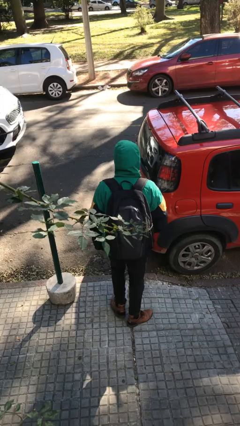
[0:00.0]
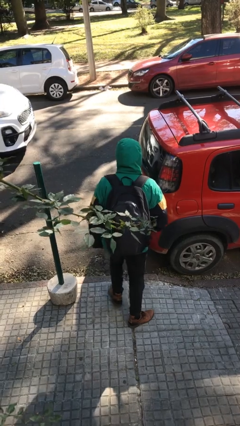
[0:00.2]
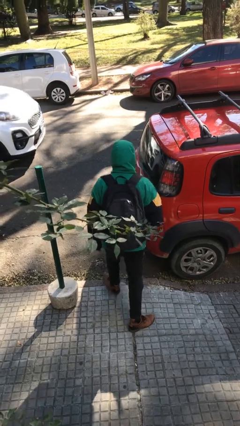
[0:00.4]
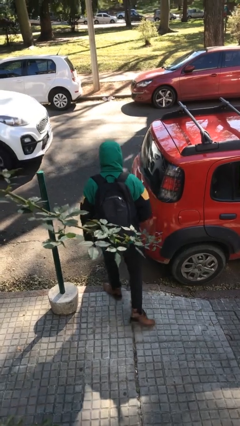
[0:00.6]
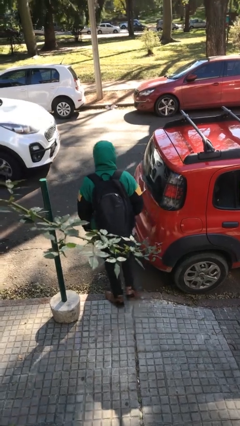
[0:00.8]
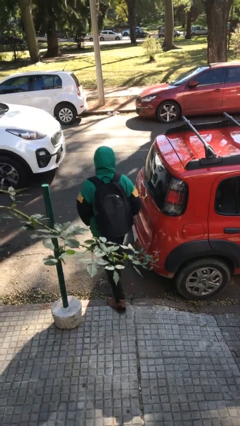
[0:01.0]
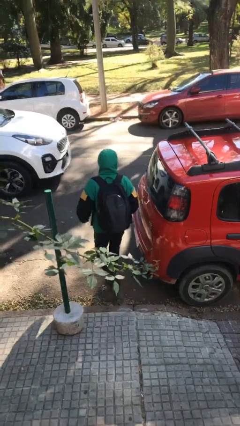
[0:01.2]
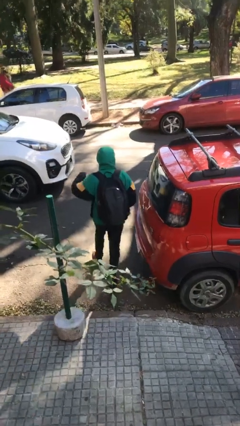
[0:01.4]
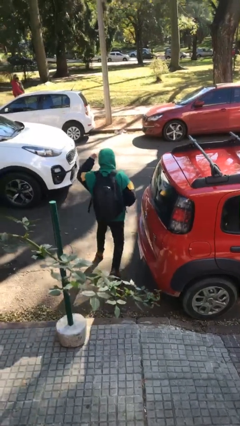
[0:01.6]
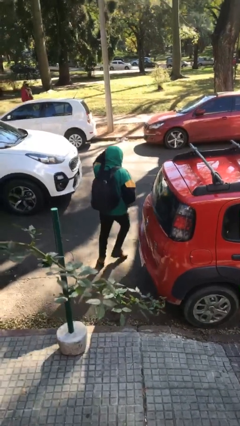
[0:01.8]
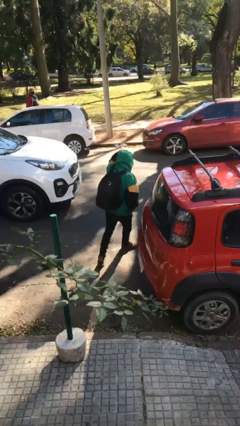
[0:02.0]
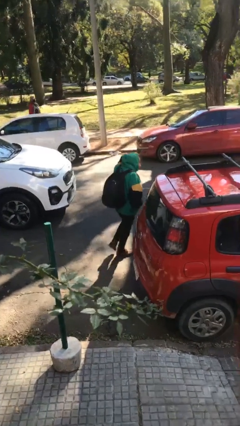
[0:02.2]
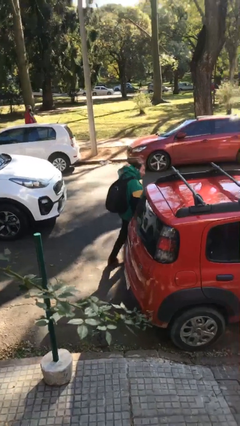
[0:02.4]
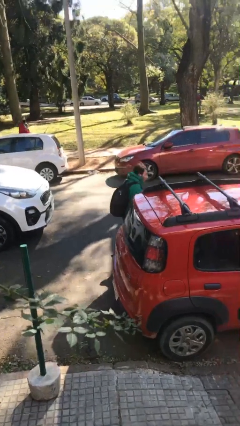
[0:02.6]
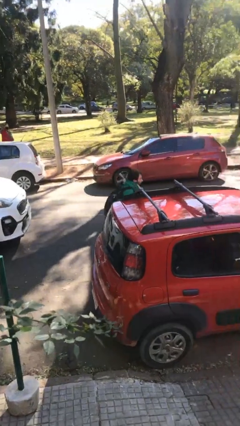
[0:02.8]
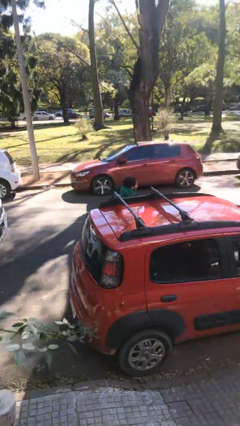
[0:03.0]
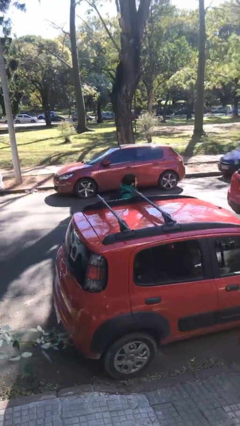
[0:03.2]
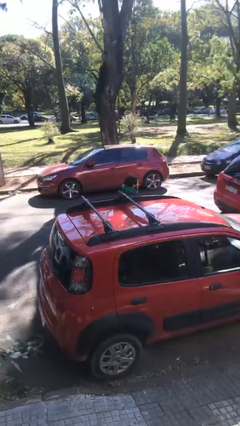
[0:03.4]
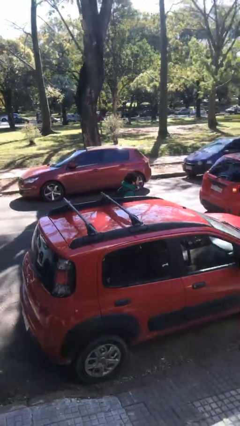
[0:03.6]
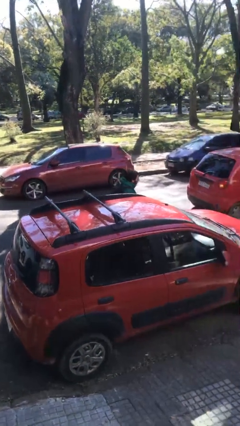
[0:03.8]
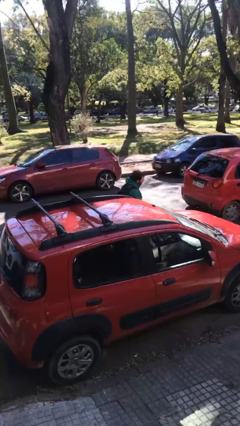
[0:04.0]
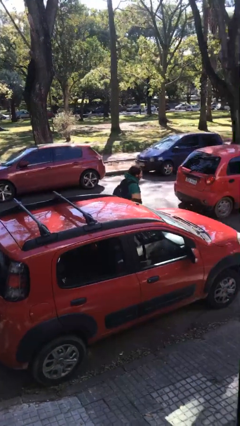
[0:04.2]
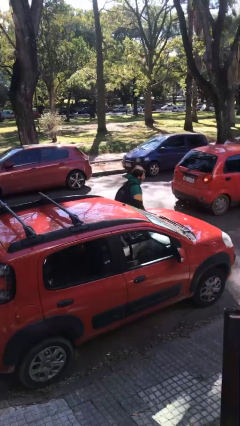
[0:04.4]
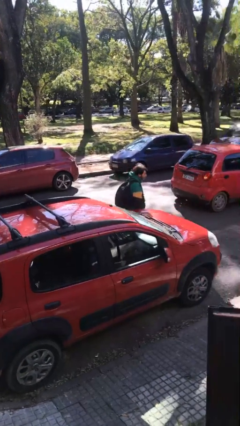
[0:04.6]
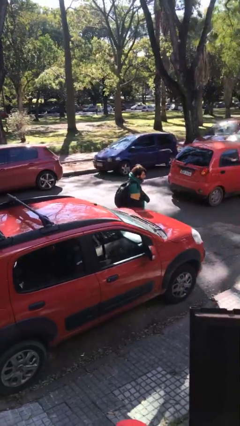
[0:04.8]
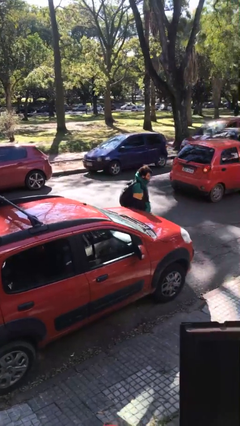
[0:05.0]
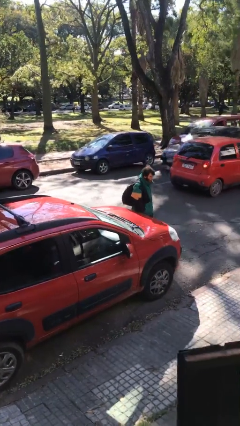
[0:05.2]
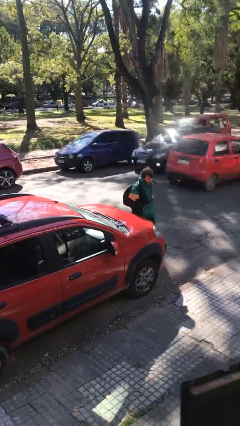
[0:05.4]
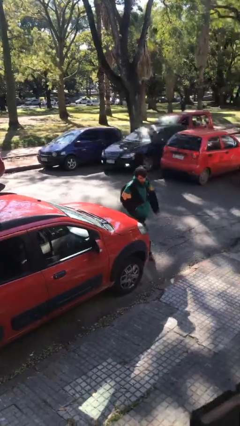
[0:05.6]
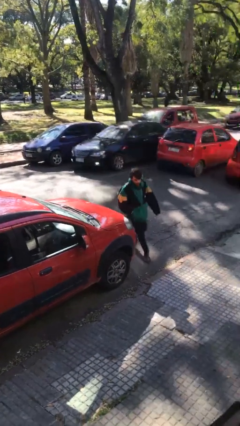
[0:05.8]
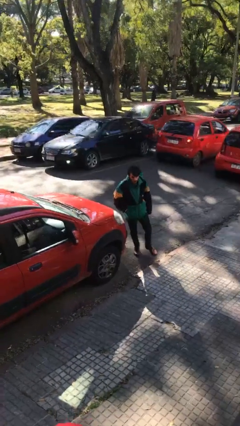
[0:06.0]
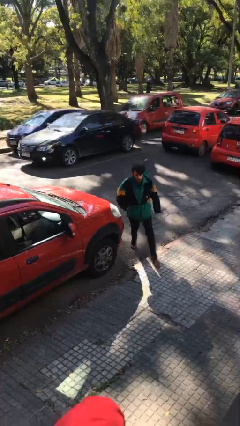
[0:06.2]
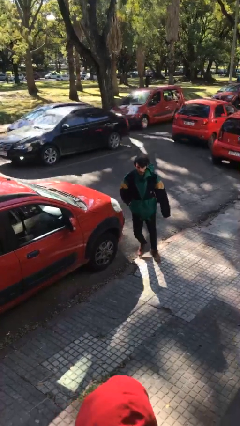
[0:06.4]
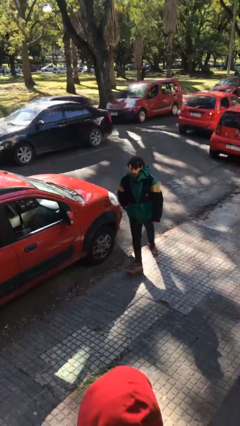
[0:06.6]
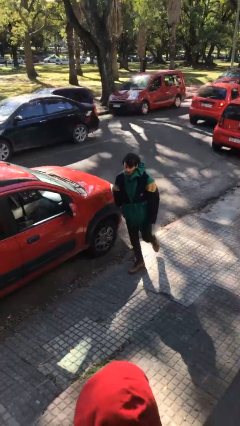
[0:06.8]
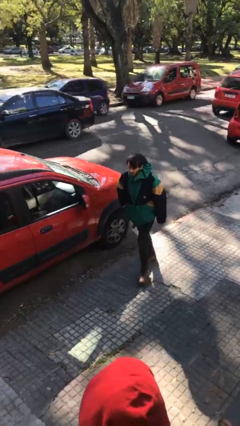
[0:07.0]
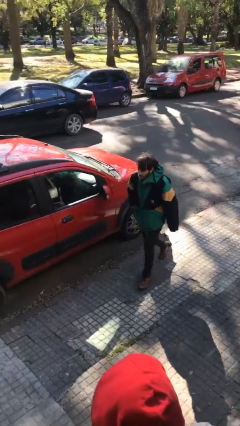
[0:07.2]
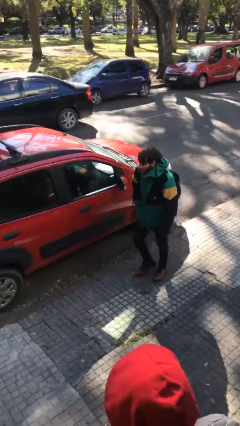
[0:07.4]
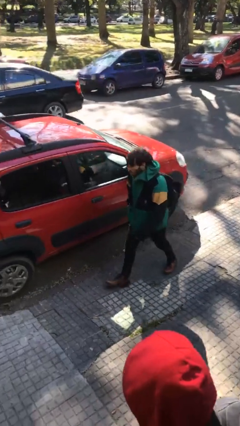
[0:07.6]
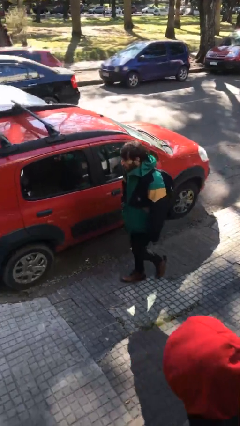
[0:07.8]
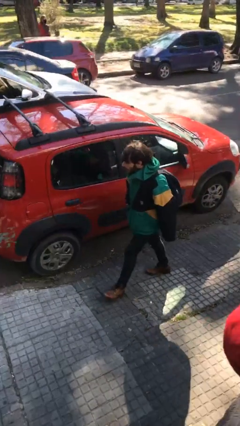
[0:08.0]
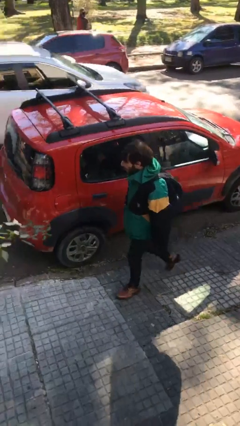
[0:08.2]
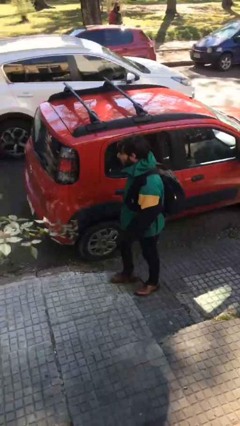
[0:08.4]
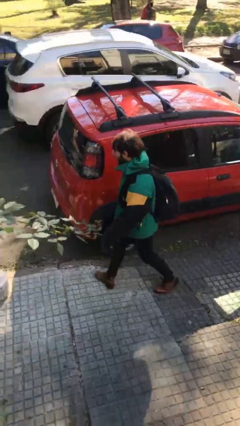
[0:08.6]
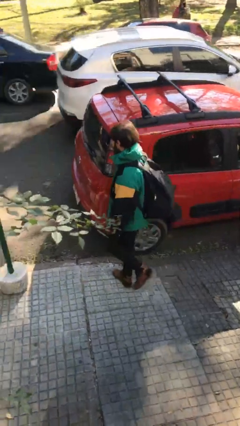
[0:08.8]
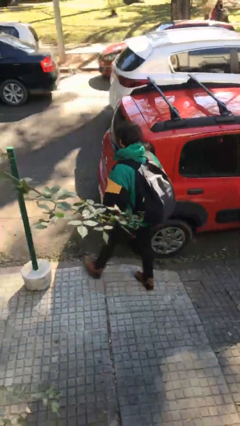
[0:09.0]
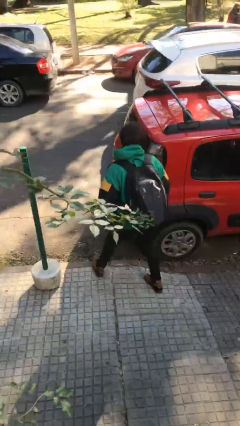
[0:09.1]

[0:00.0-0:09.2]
person walks around car

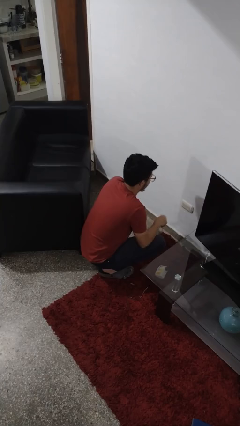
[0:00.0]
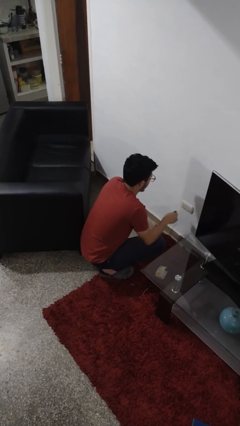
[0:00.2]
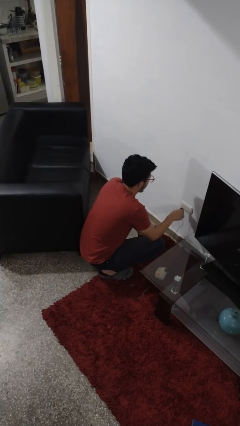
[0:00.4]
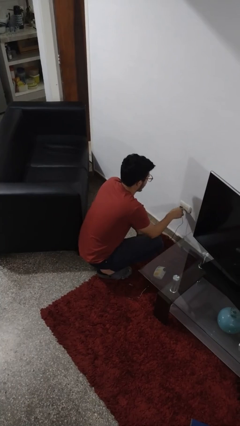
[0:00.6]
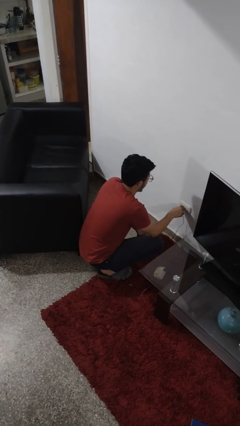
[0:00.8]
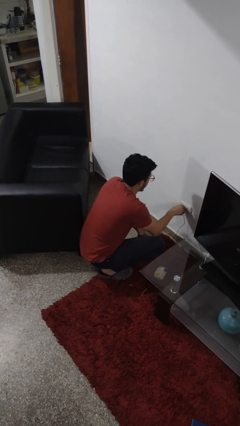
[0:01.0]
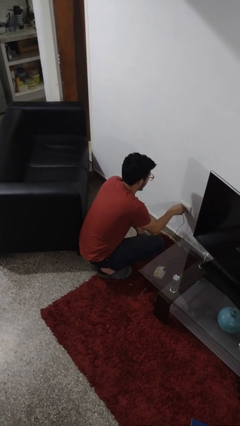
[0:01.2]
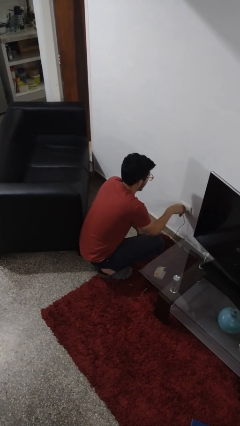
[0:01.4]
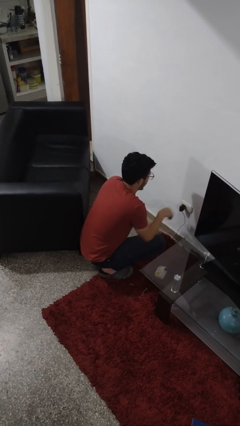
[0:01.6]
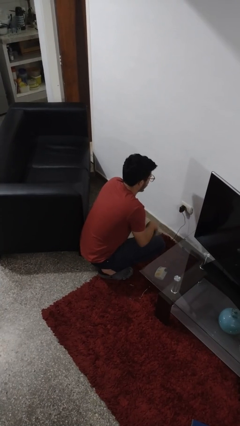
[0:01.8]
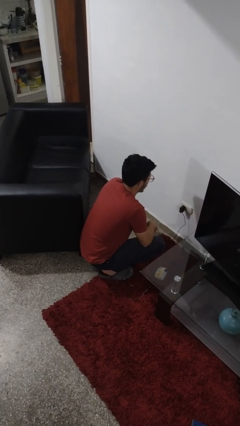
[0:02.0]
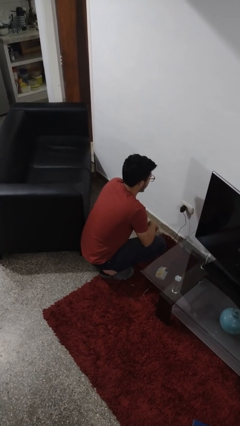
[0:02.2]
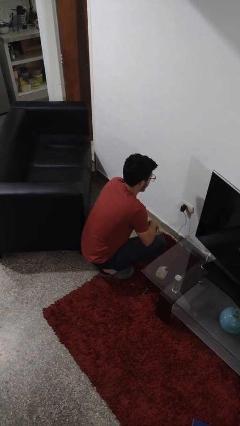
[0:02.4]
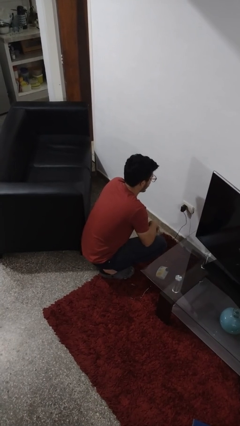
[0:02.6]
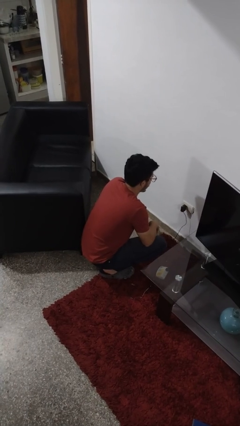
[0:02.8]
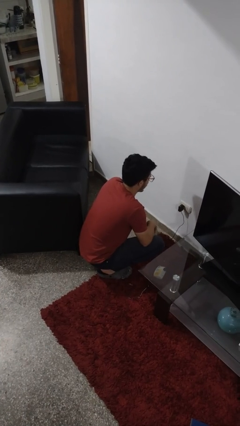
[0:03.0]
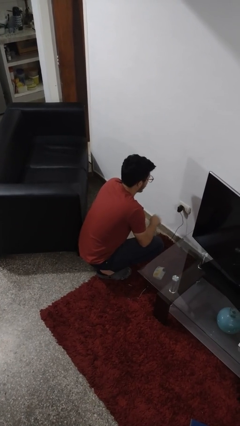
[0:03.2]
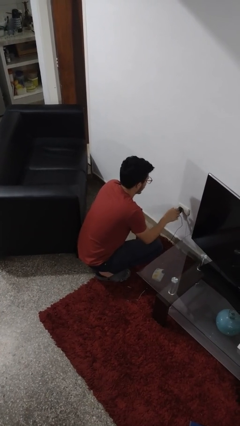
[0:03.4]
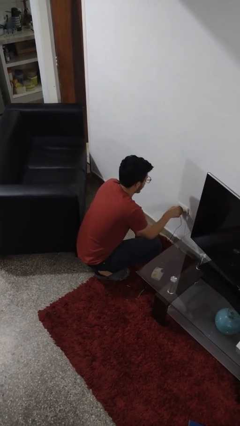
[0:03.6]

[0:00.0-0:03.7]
person plugs into electrical socket

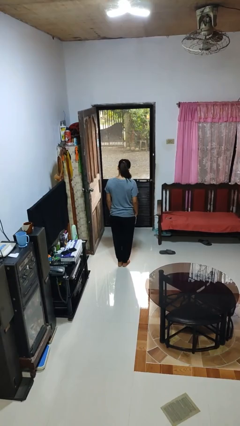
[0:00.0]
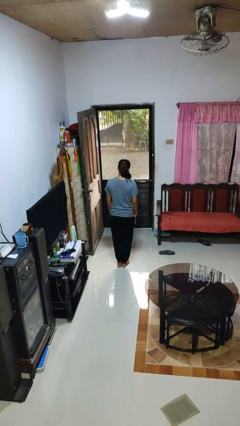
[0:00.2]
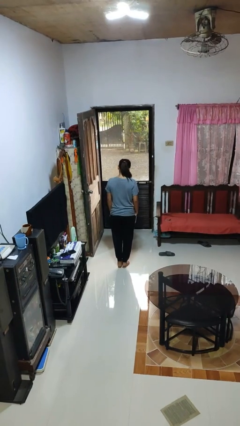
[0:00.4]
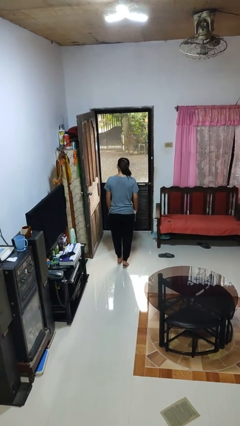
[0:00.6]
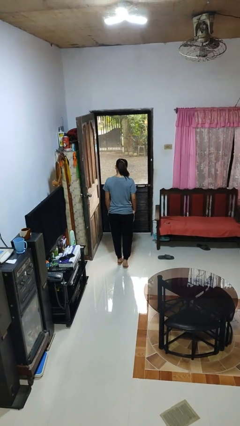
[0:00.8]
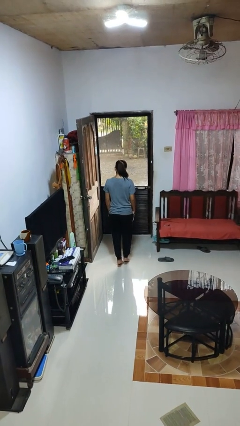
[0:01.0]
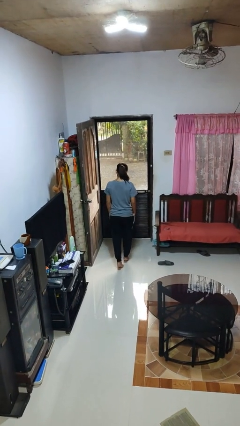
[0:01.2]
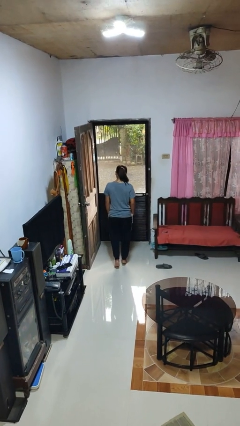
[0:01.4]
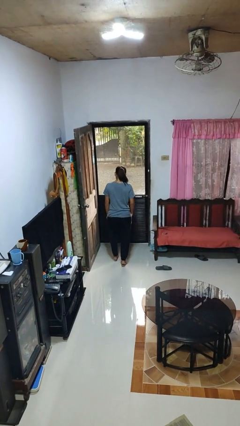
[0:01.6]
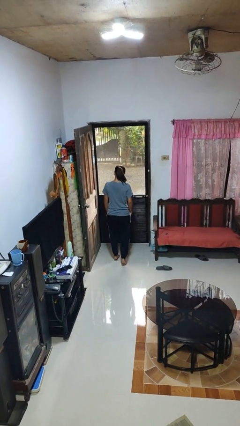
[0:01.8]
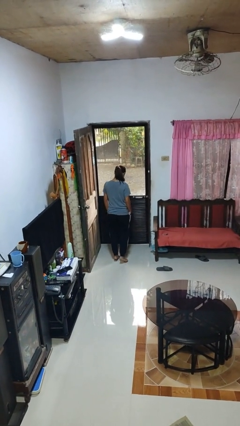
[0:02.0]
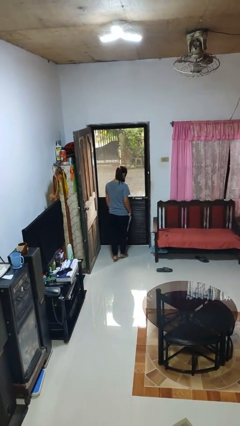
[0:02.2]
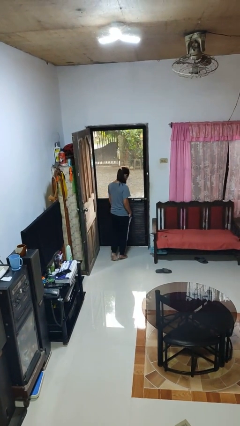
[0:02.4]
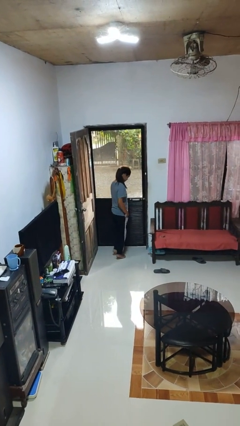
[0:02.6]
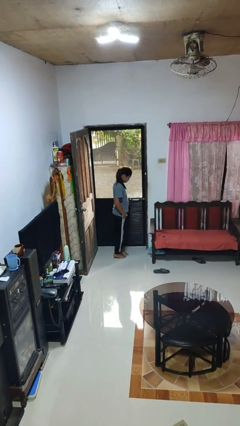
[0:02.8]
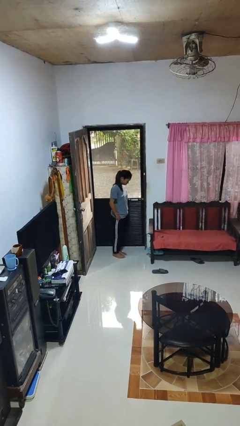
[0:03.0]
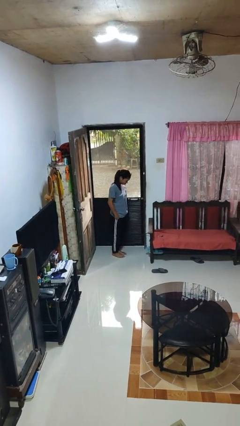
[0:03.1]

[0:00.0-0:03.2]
person walks tiptoe

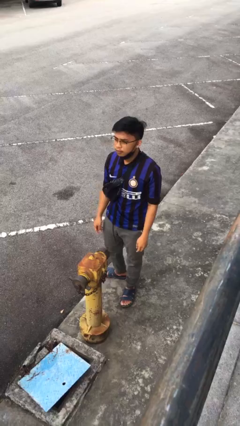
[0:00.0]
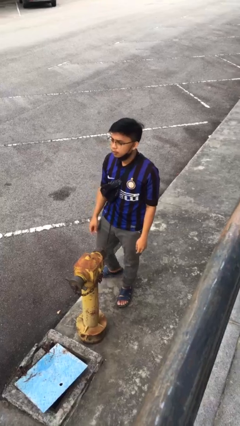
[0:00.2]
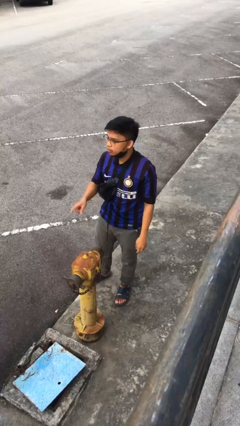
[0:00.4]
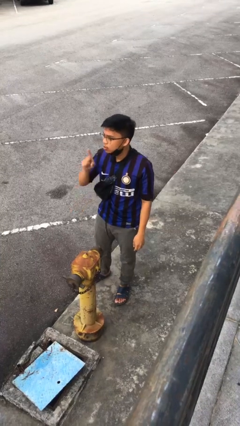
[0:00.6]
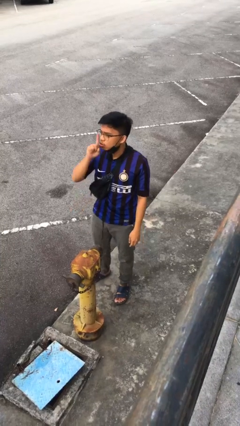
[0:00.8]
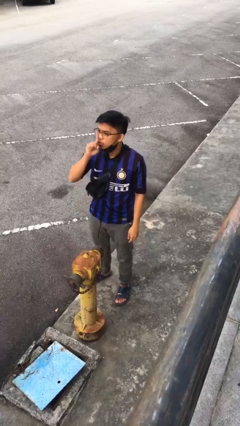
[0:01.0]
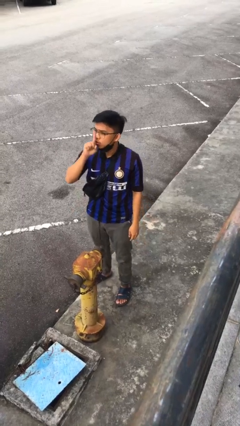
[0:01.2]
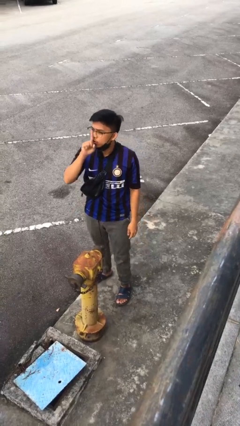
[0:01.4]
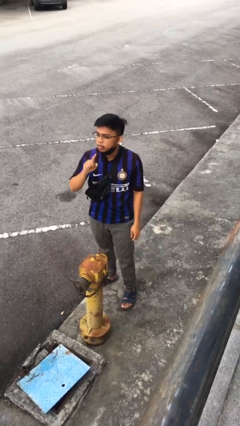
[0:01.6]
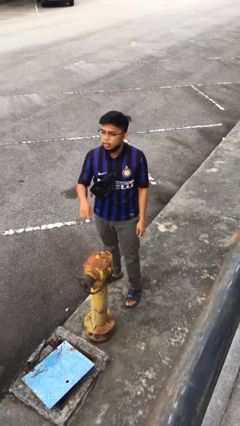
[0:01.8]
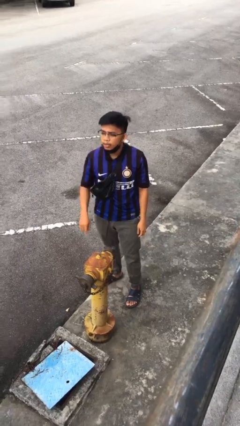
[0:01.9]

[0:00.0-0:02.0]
person gestures be quiet
